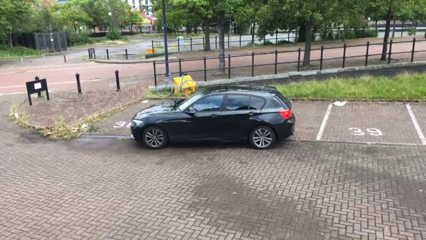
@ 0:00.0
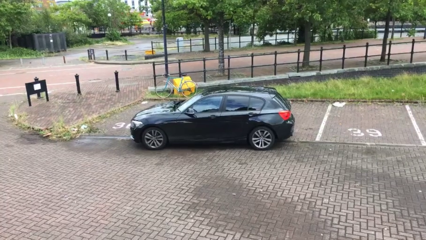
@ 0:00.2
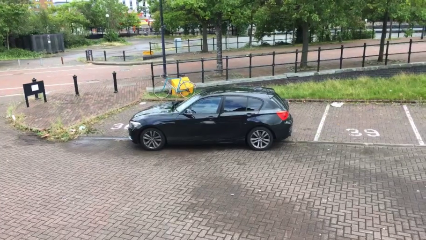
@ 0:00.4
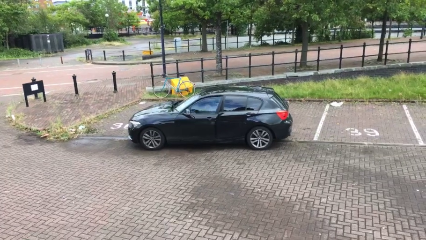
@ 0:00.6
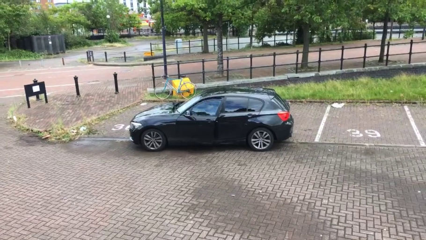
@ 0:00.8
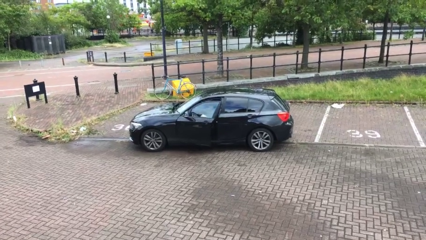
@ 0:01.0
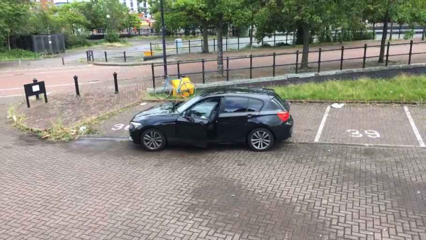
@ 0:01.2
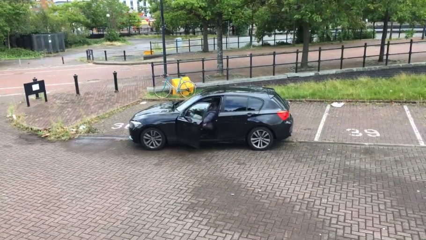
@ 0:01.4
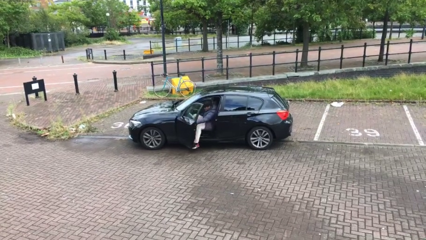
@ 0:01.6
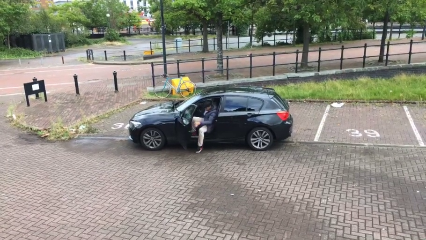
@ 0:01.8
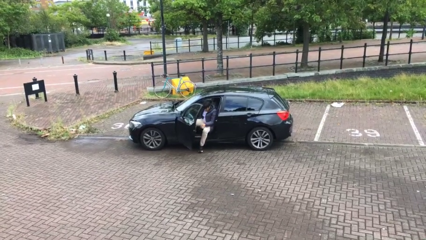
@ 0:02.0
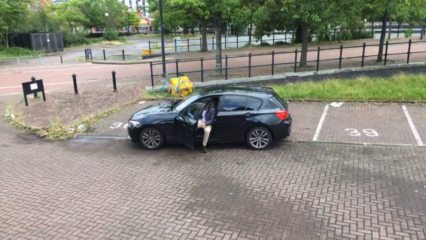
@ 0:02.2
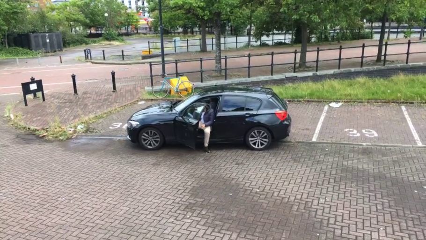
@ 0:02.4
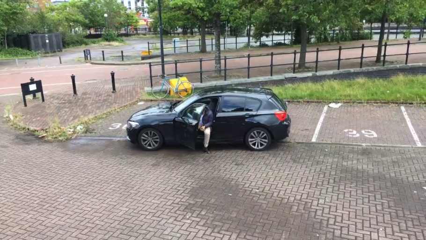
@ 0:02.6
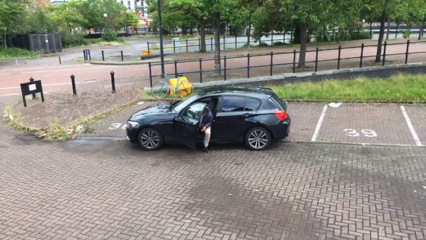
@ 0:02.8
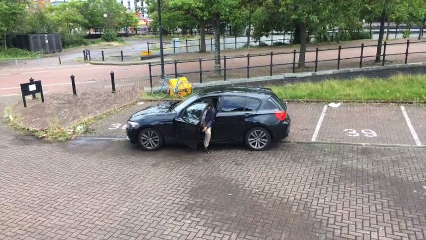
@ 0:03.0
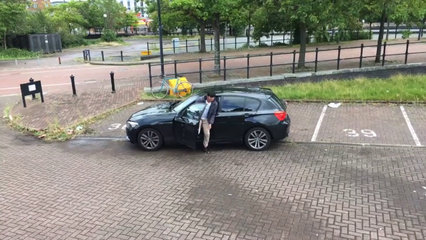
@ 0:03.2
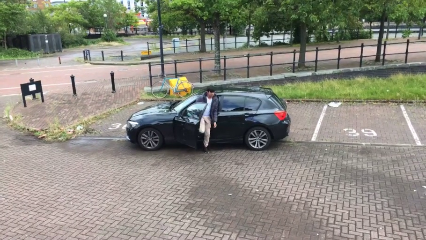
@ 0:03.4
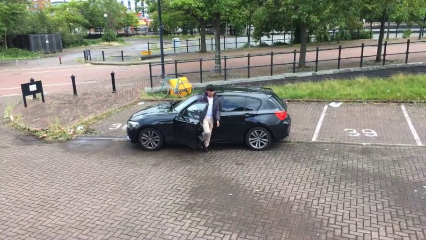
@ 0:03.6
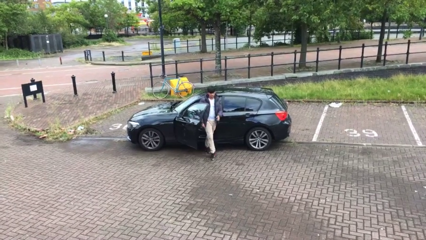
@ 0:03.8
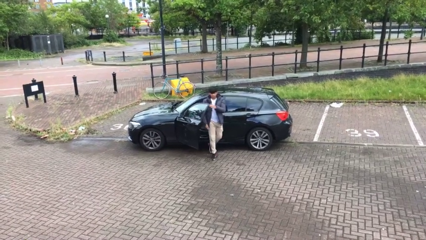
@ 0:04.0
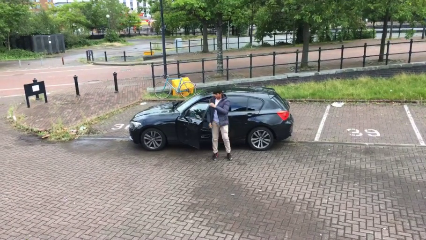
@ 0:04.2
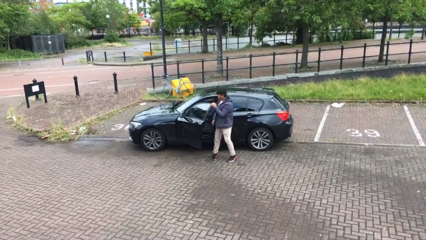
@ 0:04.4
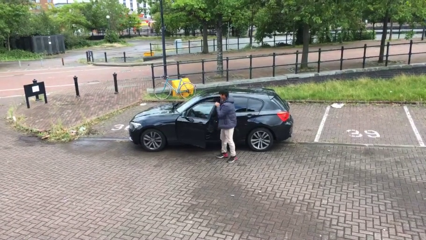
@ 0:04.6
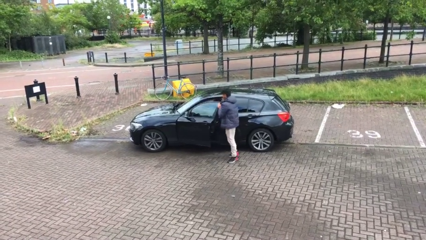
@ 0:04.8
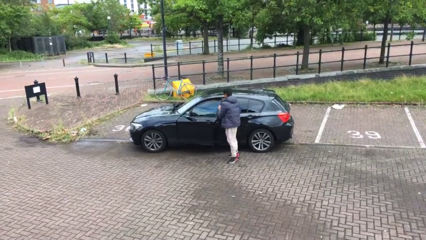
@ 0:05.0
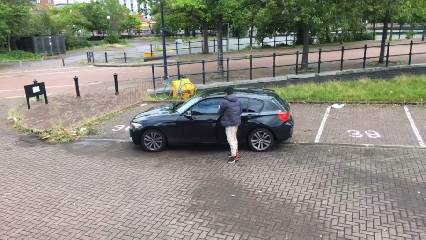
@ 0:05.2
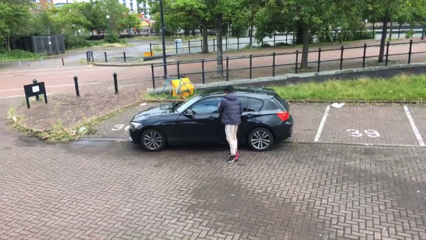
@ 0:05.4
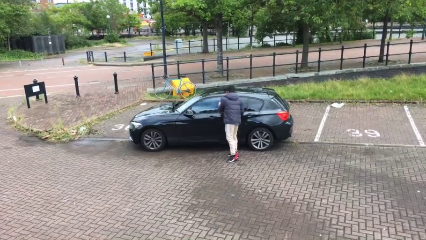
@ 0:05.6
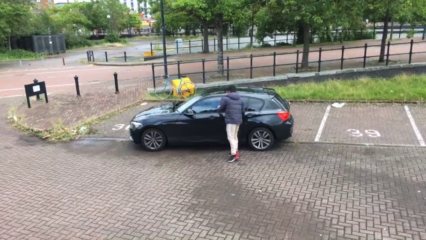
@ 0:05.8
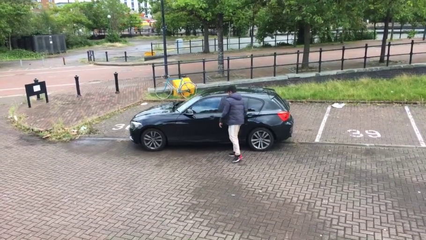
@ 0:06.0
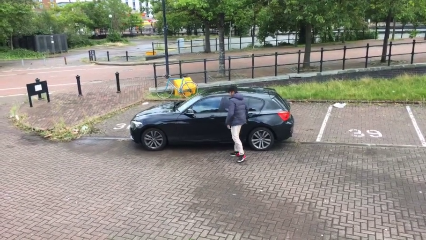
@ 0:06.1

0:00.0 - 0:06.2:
car drops off person

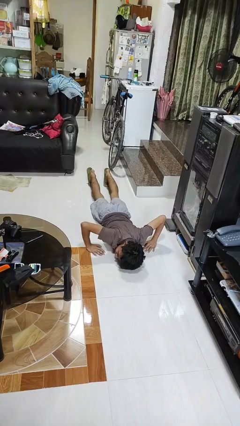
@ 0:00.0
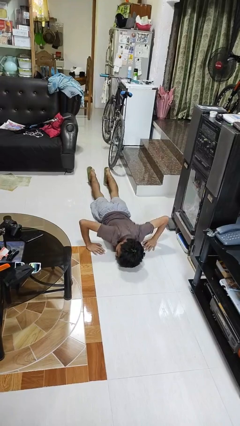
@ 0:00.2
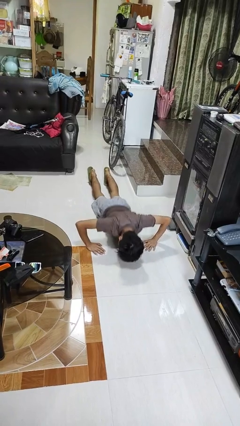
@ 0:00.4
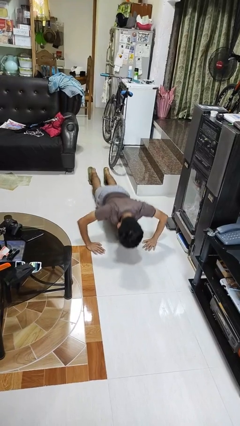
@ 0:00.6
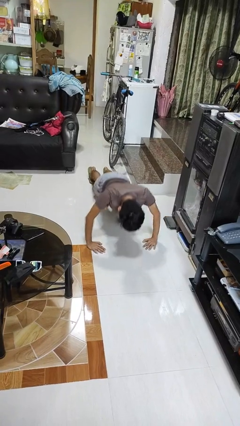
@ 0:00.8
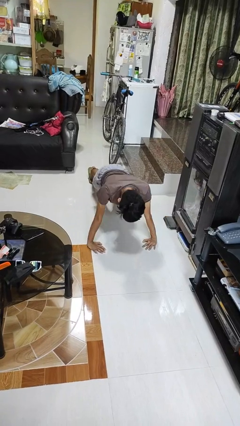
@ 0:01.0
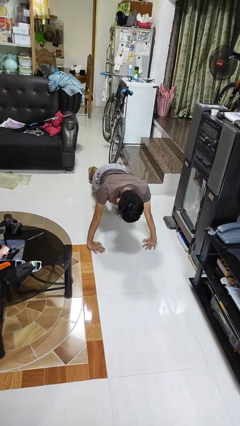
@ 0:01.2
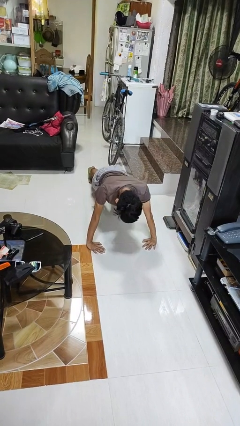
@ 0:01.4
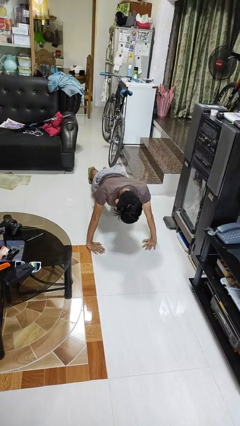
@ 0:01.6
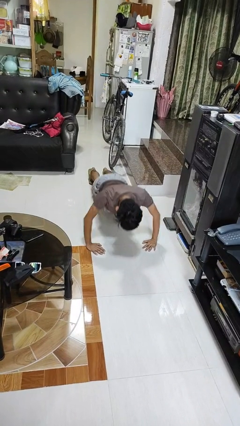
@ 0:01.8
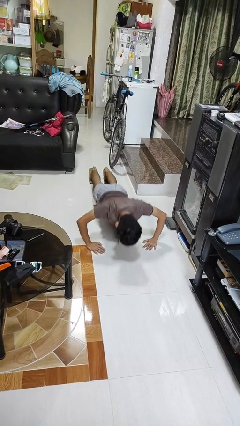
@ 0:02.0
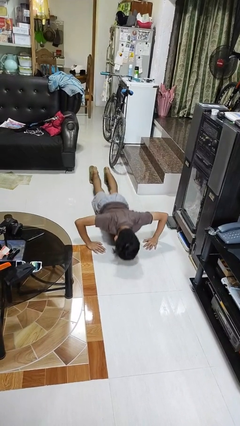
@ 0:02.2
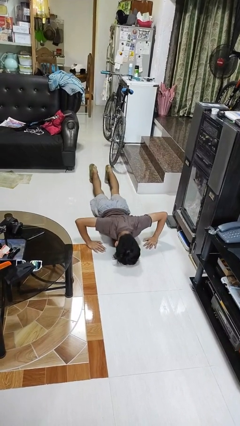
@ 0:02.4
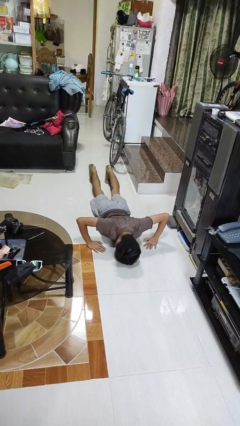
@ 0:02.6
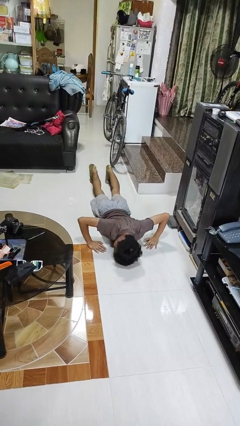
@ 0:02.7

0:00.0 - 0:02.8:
person exercises with pushup

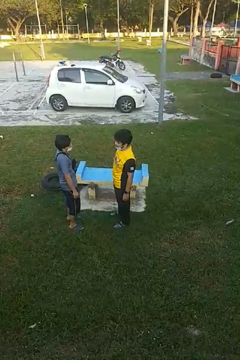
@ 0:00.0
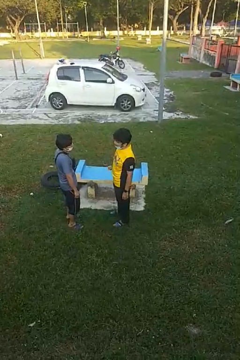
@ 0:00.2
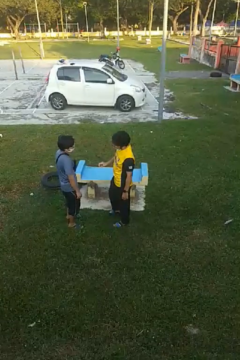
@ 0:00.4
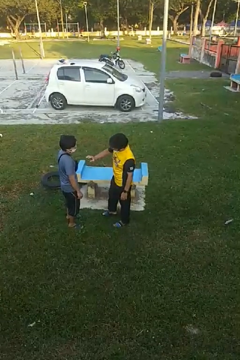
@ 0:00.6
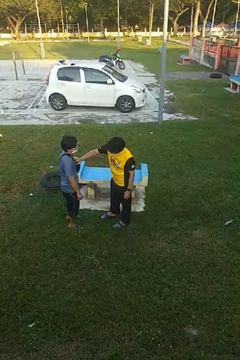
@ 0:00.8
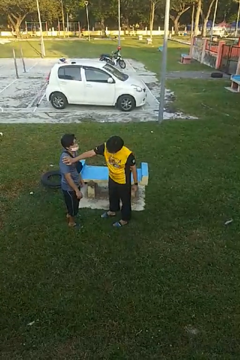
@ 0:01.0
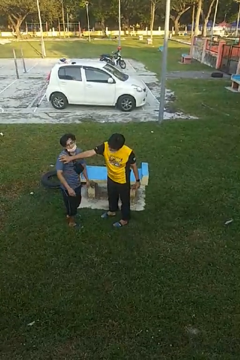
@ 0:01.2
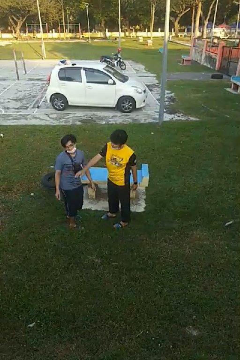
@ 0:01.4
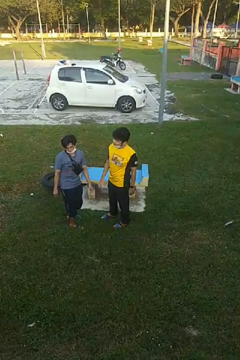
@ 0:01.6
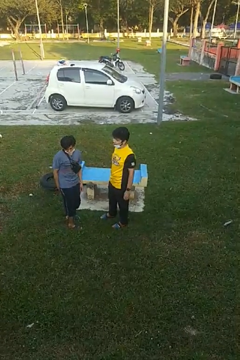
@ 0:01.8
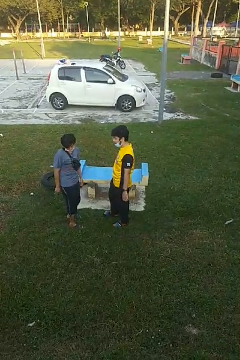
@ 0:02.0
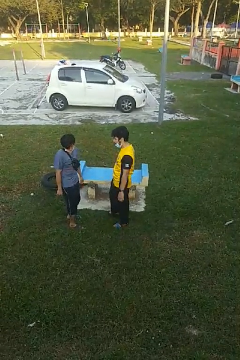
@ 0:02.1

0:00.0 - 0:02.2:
person shoves person

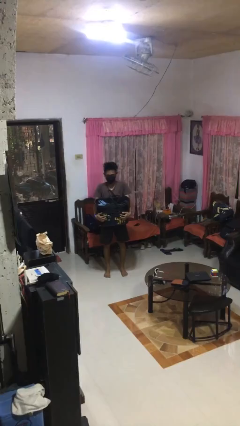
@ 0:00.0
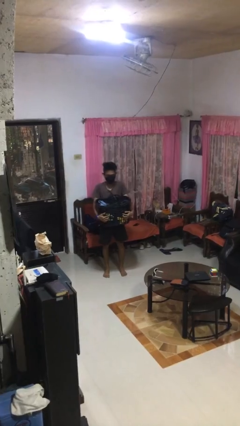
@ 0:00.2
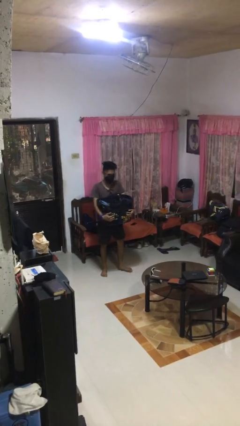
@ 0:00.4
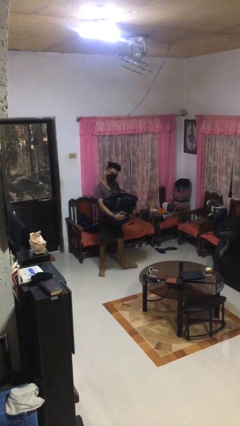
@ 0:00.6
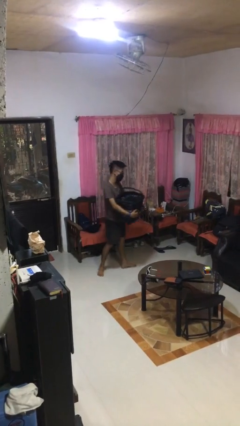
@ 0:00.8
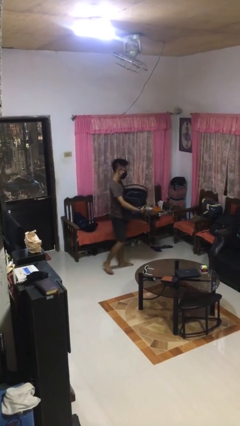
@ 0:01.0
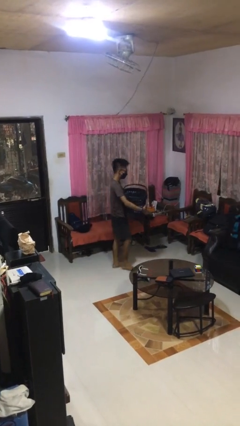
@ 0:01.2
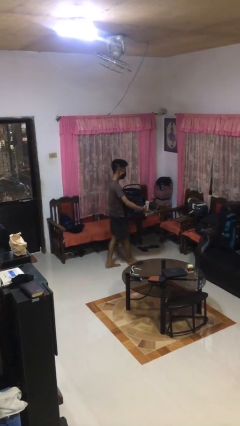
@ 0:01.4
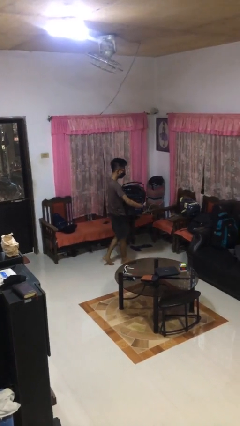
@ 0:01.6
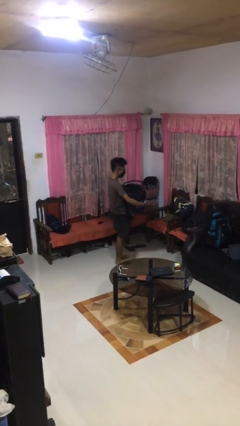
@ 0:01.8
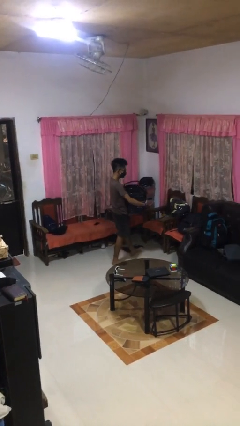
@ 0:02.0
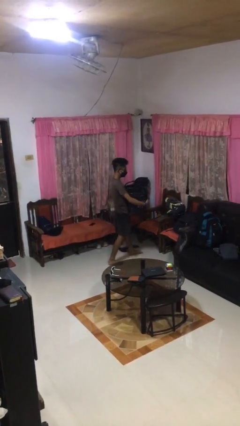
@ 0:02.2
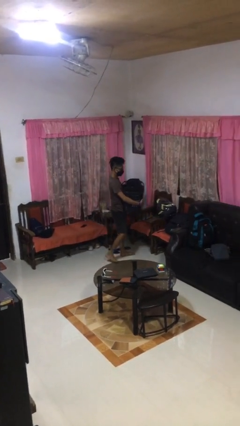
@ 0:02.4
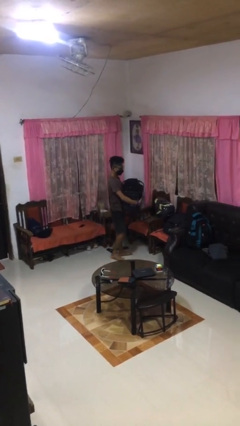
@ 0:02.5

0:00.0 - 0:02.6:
person carries laundry basket

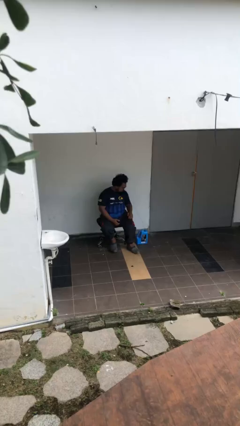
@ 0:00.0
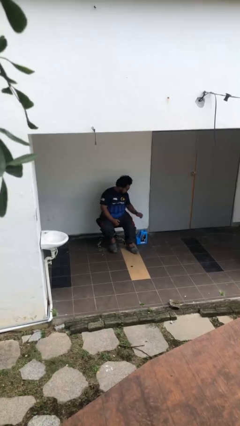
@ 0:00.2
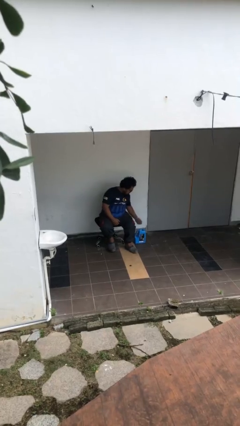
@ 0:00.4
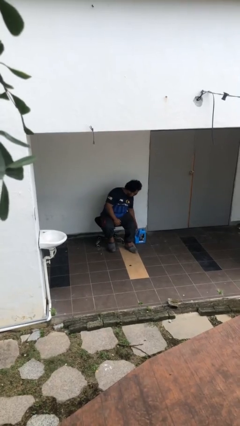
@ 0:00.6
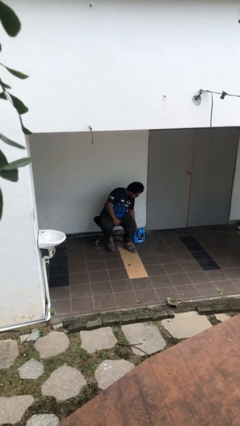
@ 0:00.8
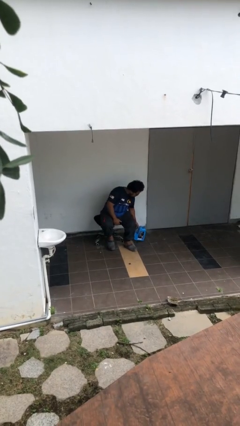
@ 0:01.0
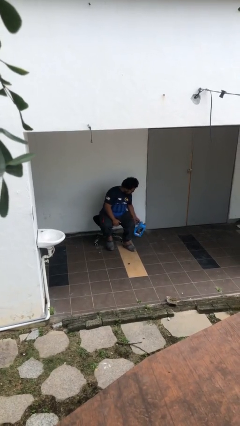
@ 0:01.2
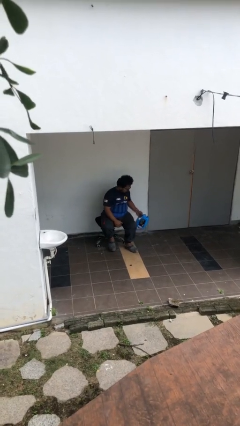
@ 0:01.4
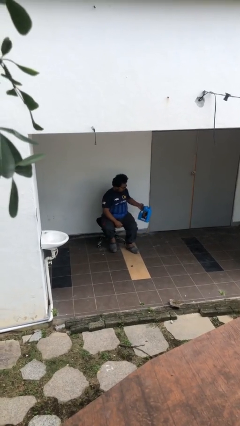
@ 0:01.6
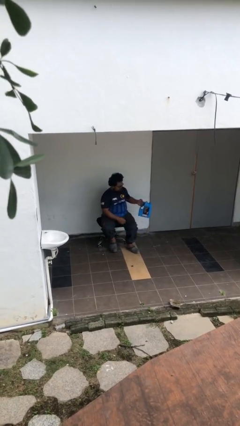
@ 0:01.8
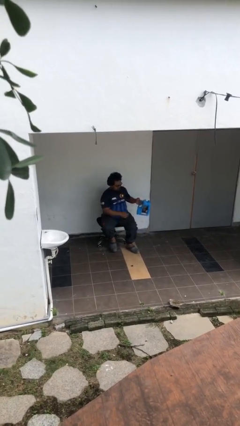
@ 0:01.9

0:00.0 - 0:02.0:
person picks up object from floor

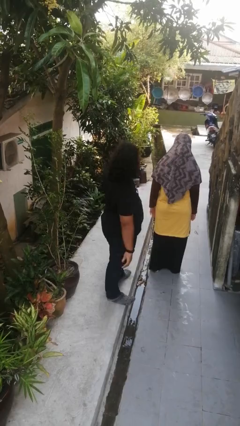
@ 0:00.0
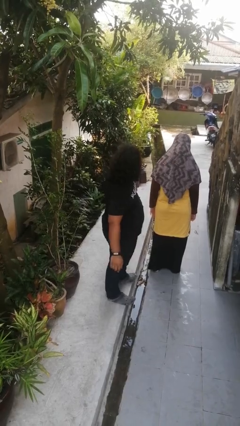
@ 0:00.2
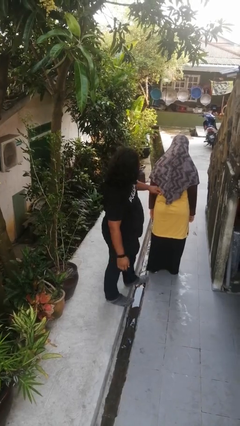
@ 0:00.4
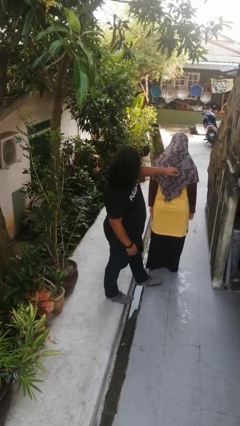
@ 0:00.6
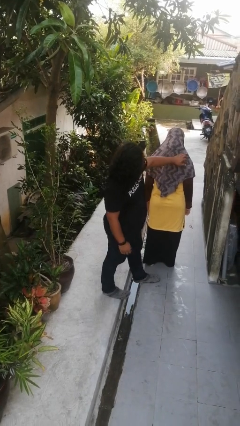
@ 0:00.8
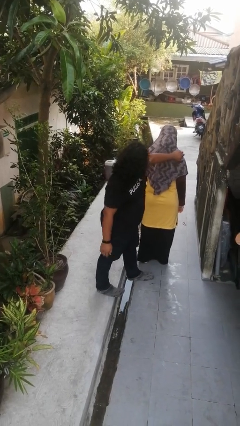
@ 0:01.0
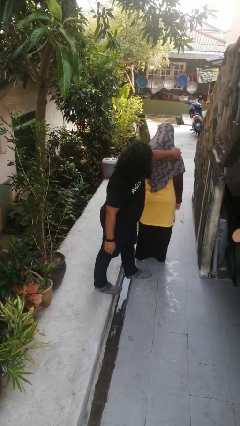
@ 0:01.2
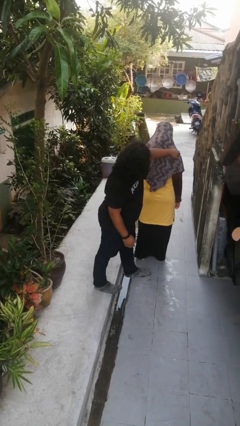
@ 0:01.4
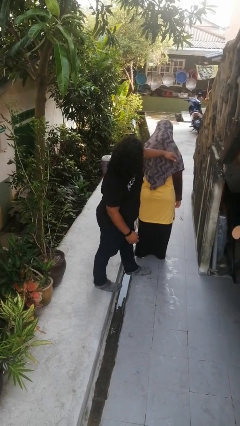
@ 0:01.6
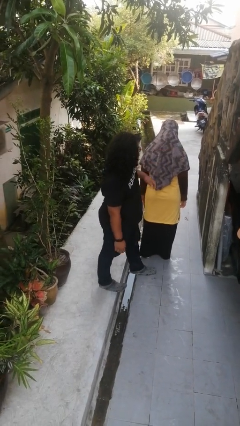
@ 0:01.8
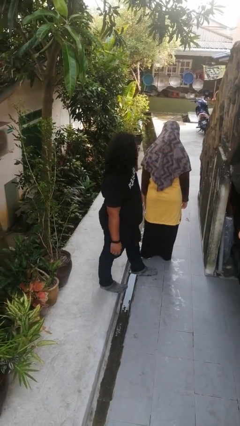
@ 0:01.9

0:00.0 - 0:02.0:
person touches back of person
